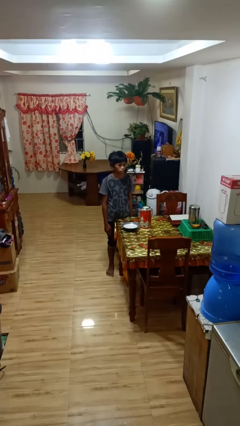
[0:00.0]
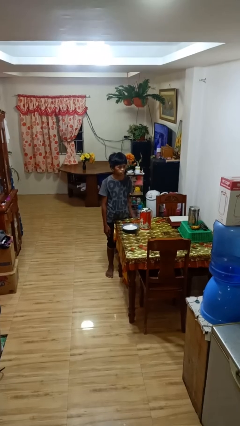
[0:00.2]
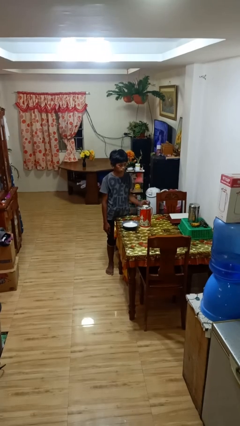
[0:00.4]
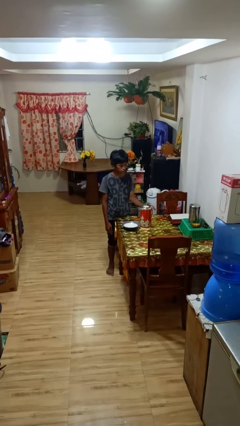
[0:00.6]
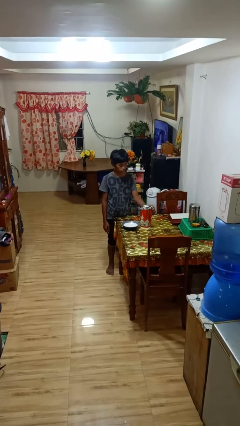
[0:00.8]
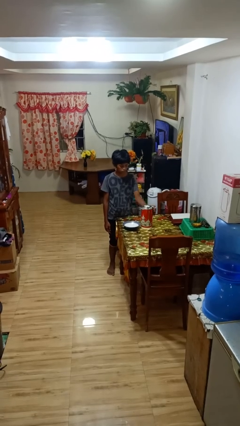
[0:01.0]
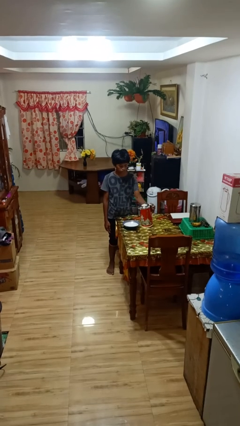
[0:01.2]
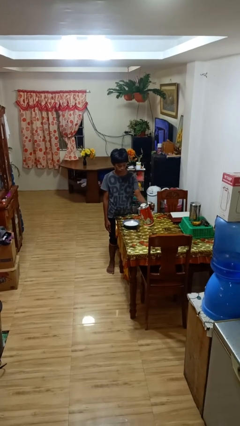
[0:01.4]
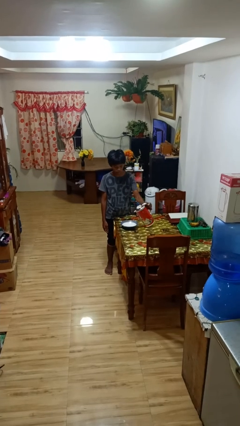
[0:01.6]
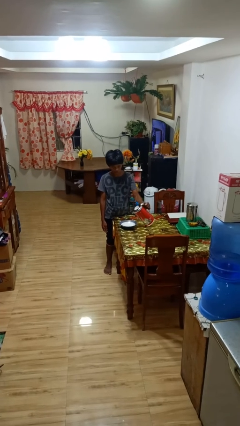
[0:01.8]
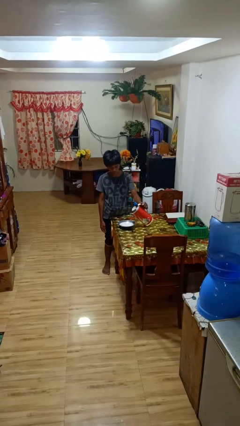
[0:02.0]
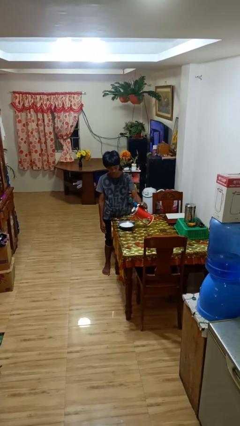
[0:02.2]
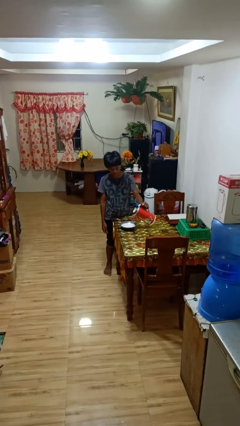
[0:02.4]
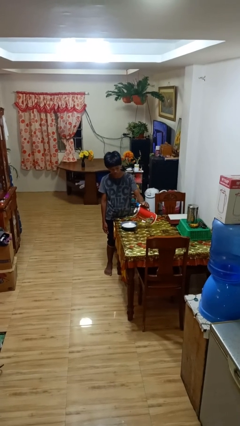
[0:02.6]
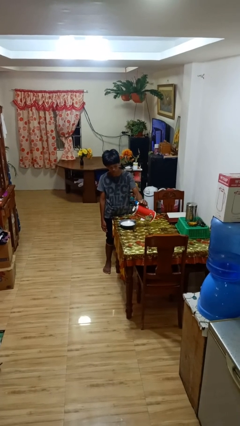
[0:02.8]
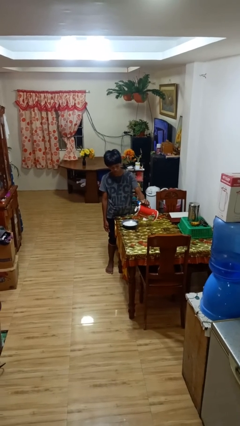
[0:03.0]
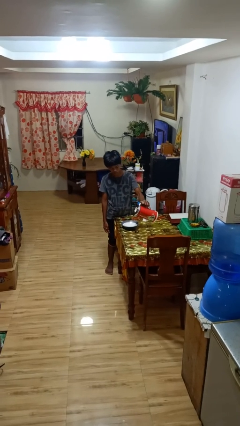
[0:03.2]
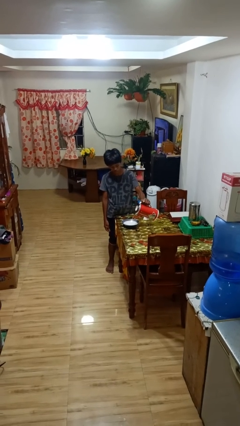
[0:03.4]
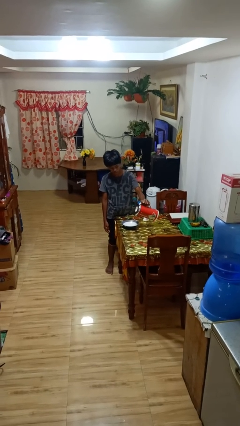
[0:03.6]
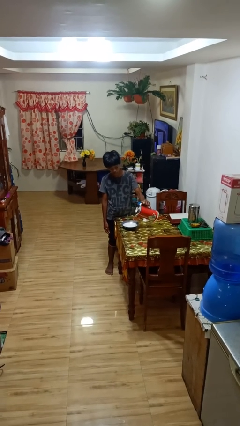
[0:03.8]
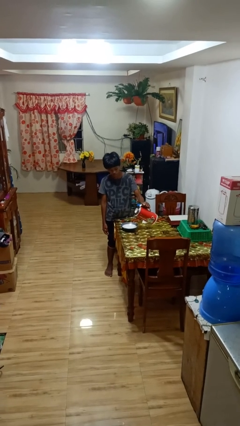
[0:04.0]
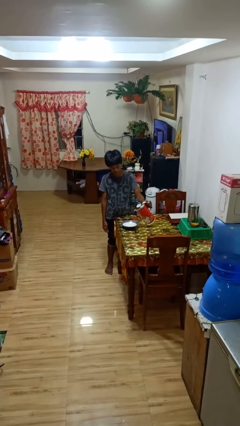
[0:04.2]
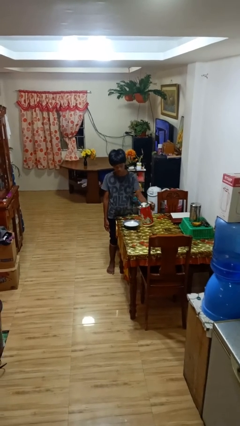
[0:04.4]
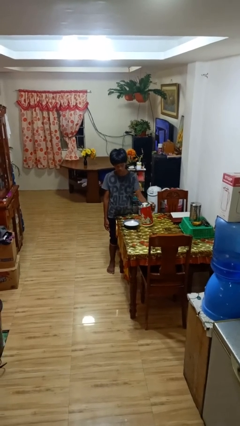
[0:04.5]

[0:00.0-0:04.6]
person pours into bowl

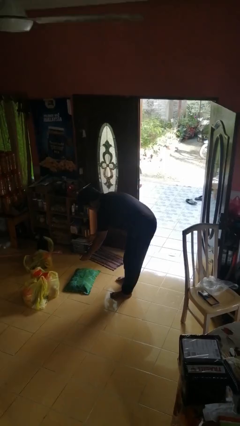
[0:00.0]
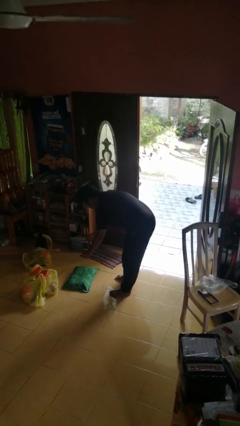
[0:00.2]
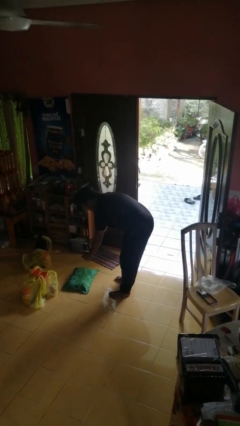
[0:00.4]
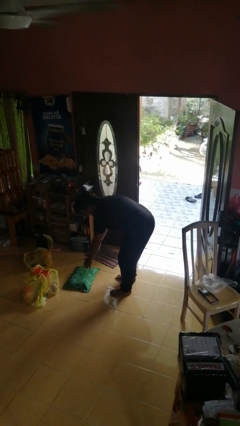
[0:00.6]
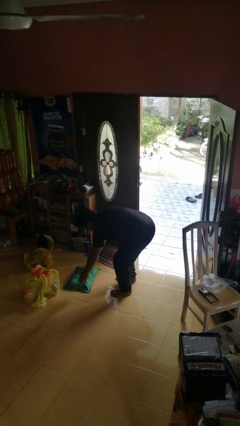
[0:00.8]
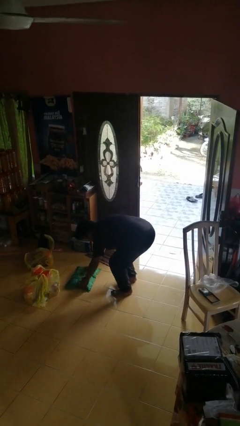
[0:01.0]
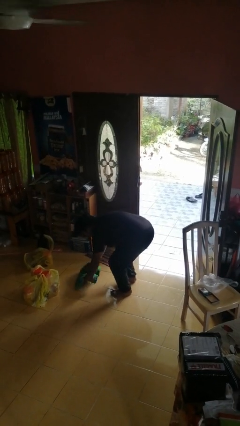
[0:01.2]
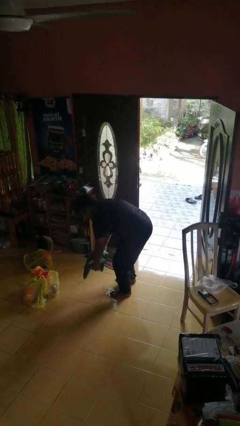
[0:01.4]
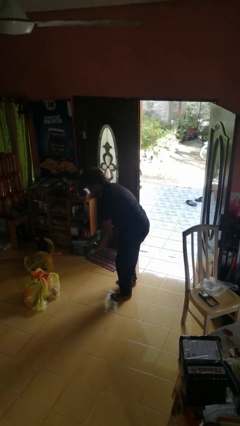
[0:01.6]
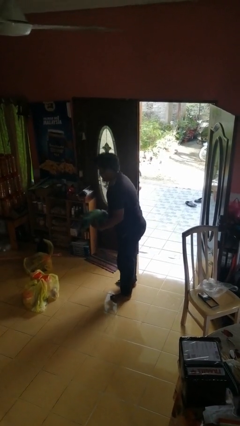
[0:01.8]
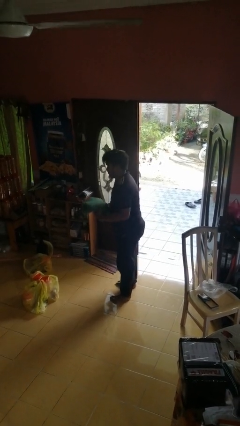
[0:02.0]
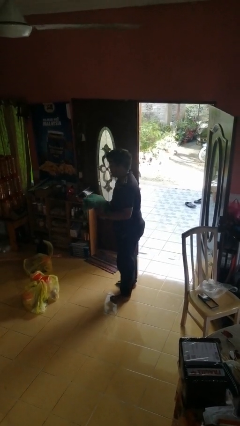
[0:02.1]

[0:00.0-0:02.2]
person picks up object from floor

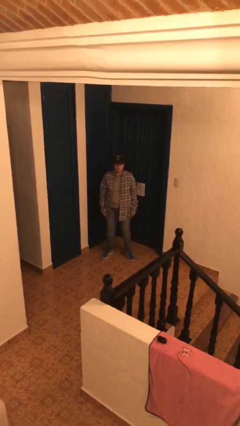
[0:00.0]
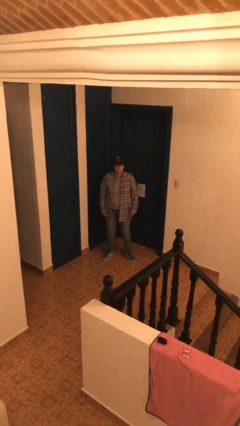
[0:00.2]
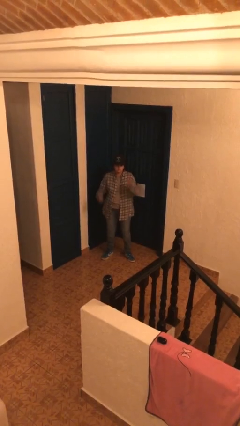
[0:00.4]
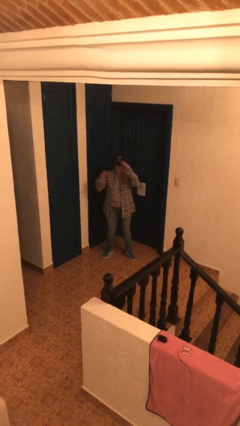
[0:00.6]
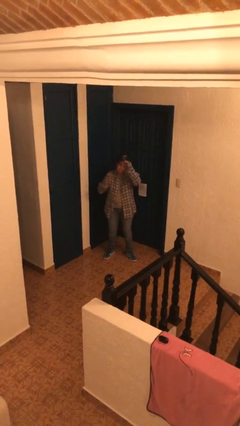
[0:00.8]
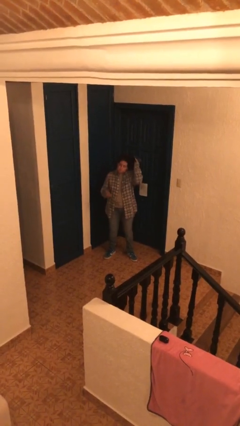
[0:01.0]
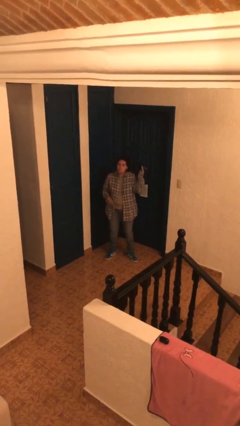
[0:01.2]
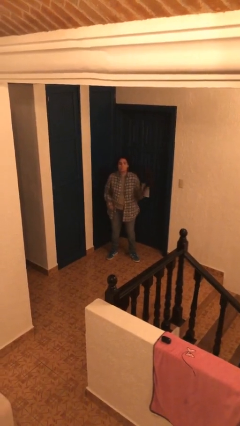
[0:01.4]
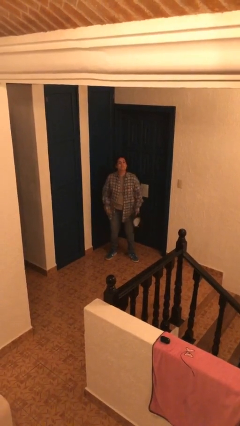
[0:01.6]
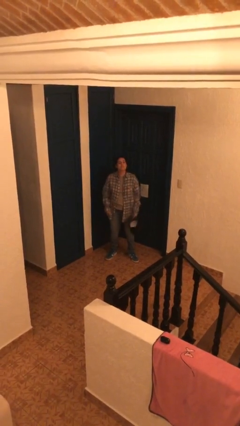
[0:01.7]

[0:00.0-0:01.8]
person takes off hat

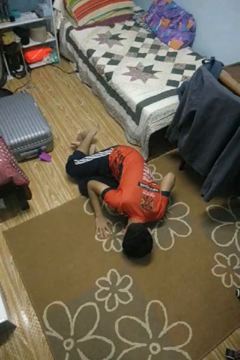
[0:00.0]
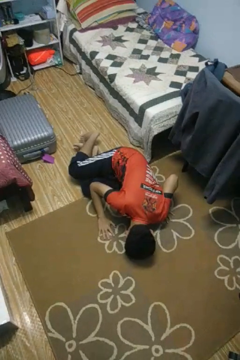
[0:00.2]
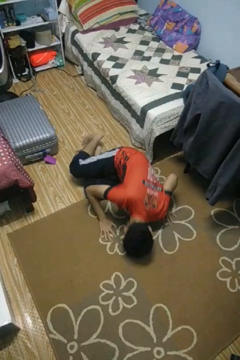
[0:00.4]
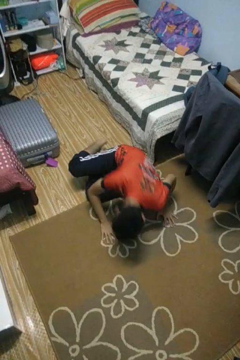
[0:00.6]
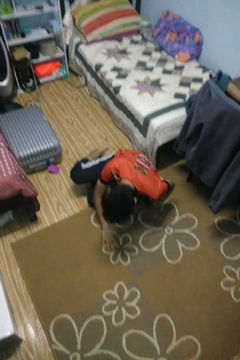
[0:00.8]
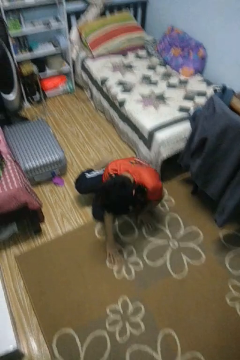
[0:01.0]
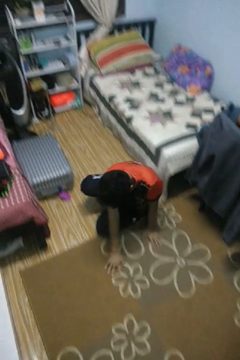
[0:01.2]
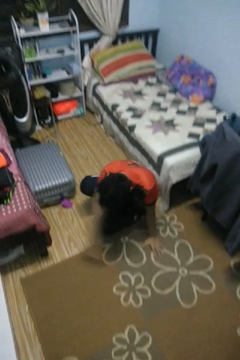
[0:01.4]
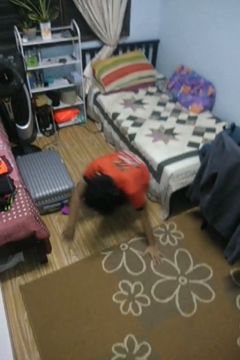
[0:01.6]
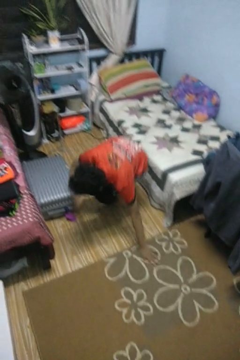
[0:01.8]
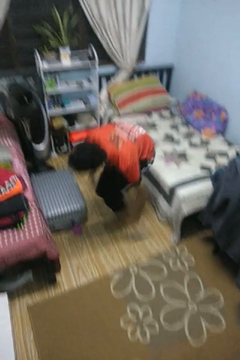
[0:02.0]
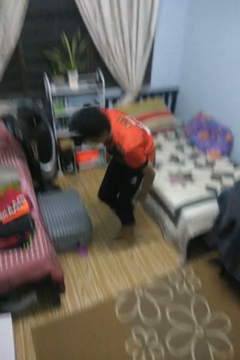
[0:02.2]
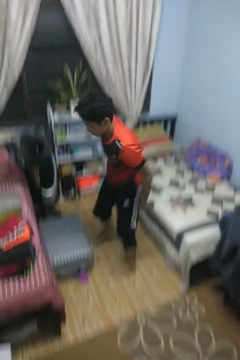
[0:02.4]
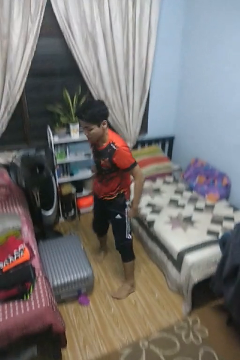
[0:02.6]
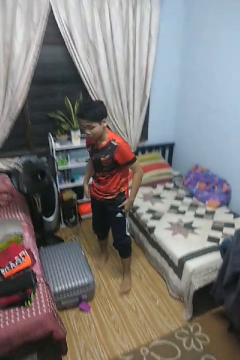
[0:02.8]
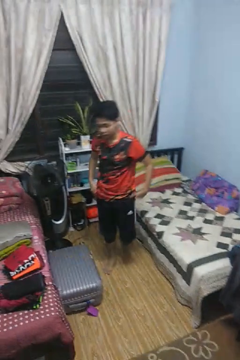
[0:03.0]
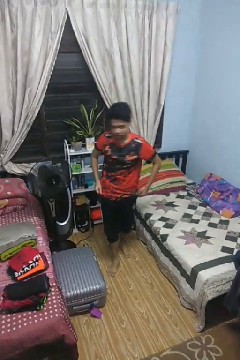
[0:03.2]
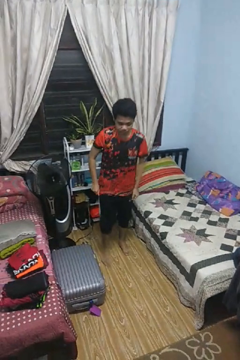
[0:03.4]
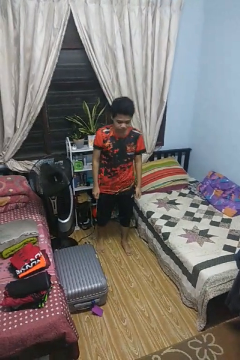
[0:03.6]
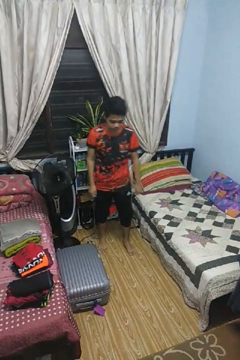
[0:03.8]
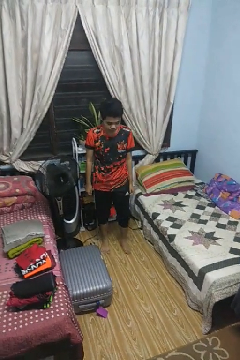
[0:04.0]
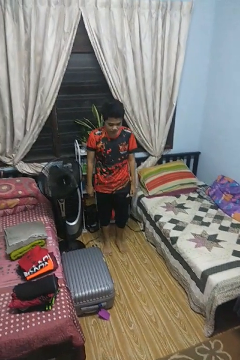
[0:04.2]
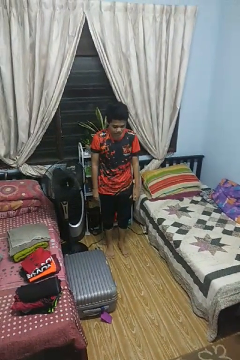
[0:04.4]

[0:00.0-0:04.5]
person stands up from floor

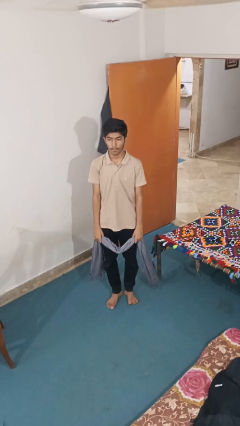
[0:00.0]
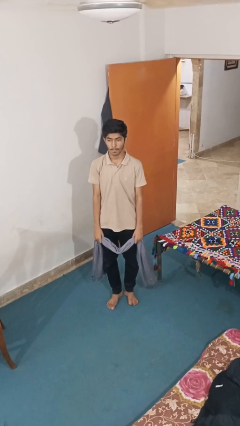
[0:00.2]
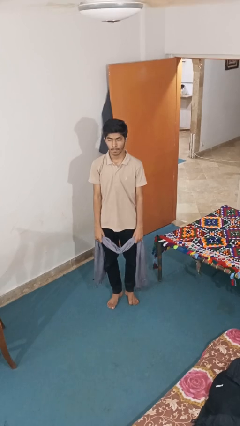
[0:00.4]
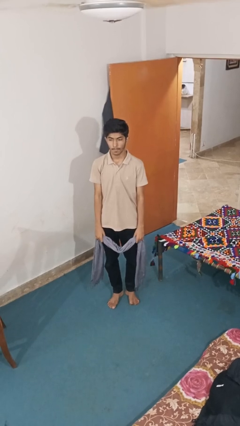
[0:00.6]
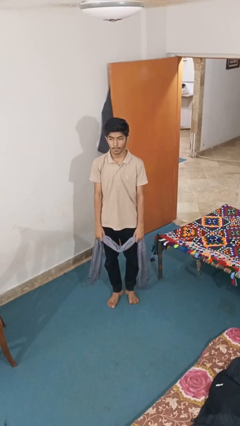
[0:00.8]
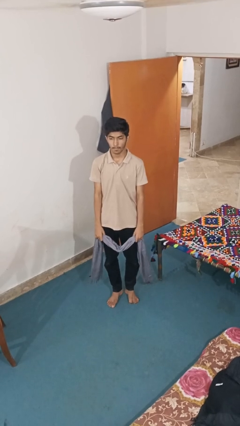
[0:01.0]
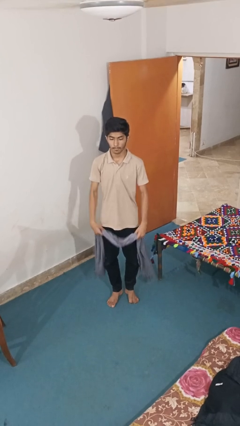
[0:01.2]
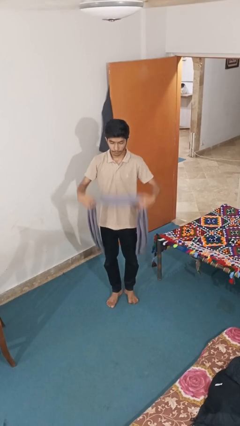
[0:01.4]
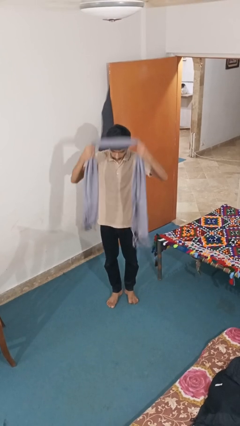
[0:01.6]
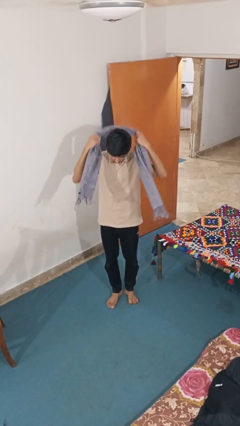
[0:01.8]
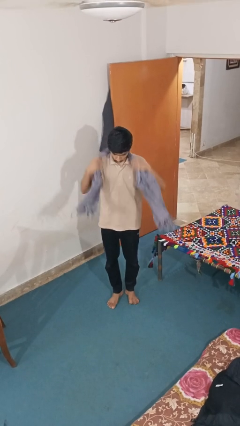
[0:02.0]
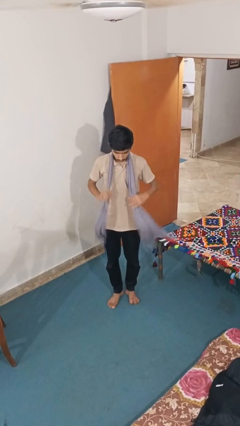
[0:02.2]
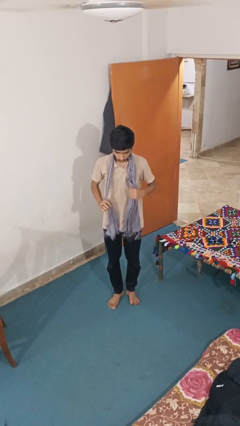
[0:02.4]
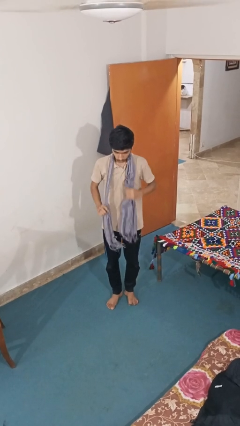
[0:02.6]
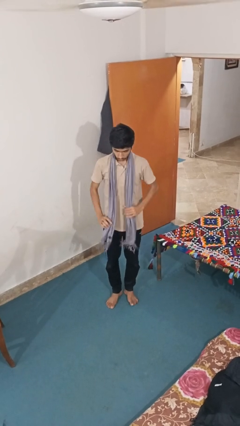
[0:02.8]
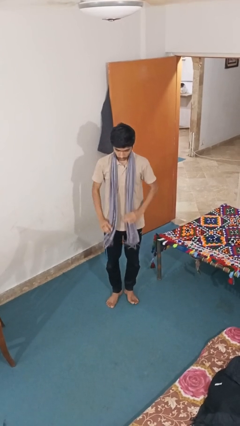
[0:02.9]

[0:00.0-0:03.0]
person puts on scarf

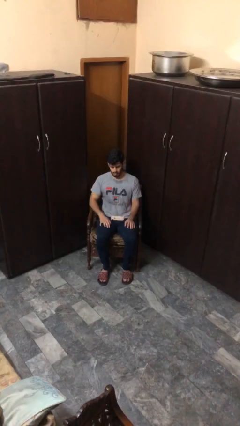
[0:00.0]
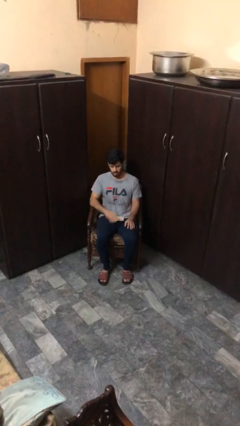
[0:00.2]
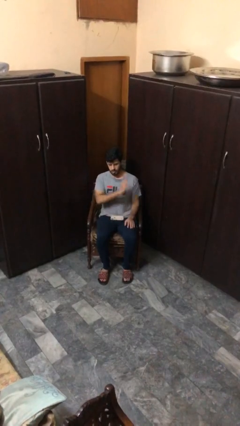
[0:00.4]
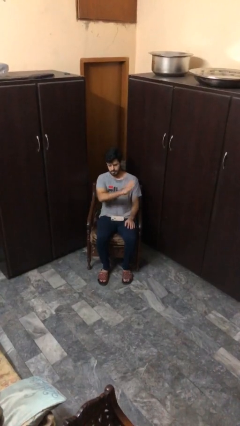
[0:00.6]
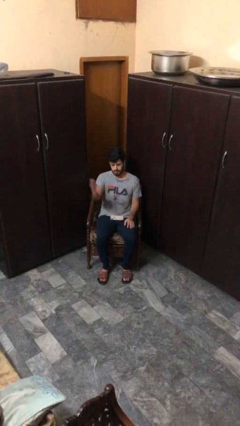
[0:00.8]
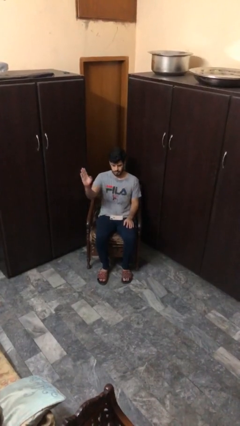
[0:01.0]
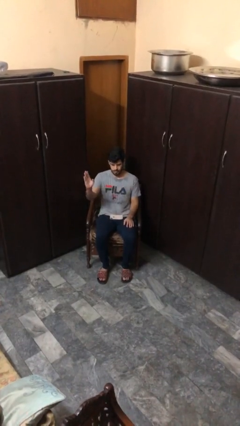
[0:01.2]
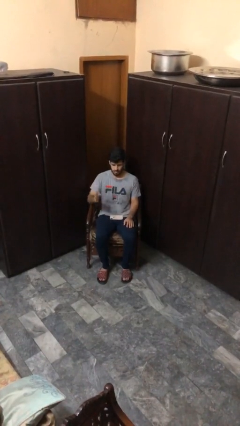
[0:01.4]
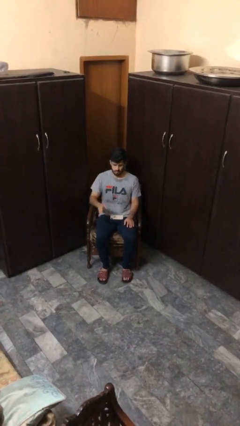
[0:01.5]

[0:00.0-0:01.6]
person gestures swipe right

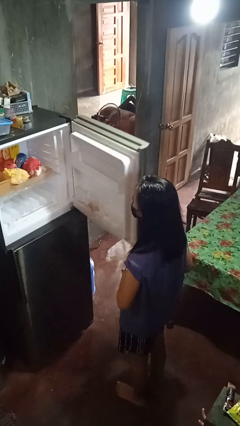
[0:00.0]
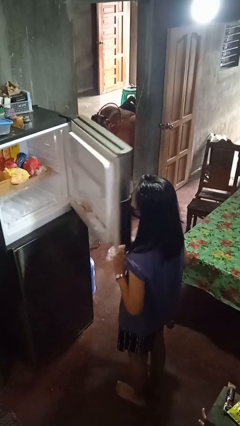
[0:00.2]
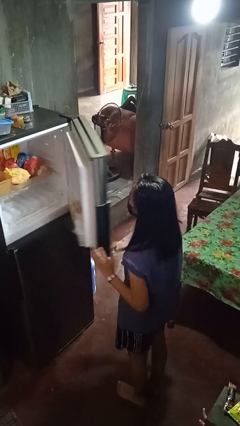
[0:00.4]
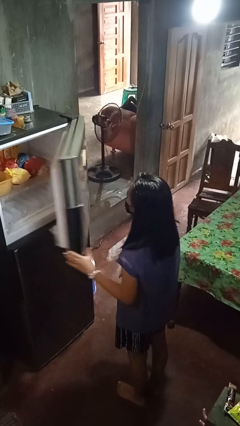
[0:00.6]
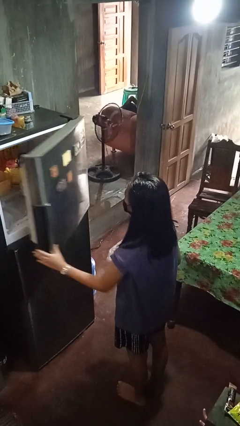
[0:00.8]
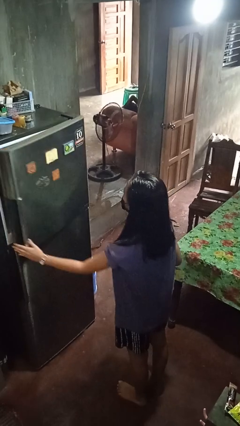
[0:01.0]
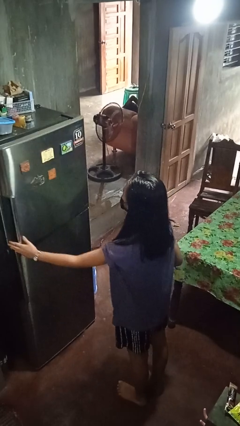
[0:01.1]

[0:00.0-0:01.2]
person closes refrigerator
